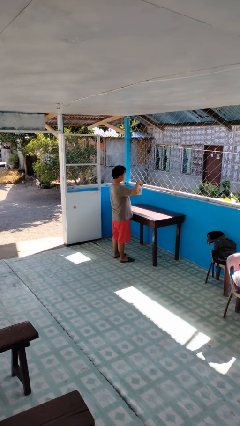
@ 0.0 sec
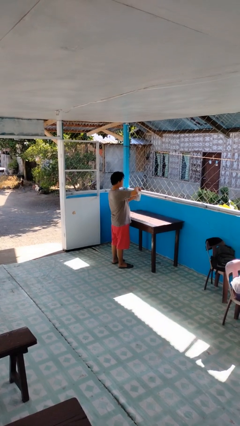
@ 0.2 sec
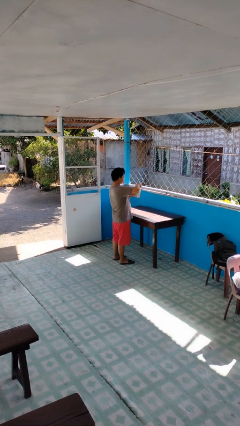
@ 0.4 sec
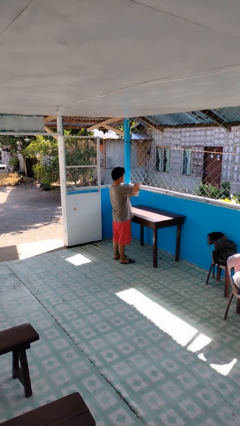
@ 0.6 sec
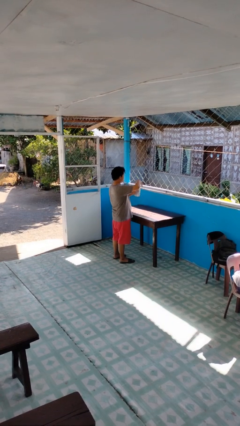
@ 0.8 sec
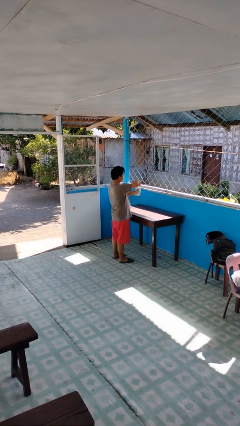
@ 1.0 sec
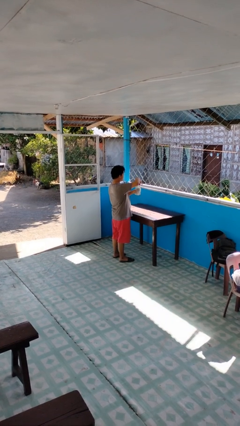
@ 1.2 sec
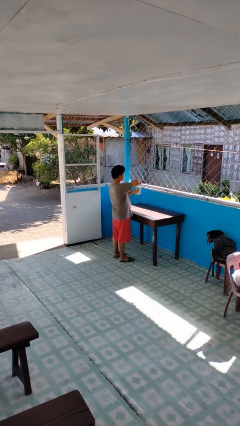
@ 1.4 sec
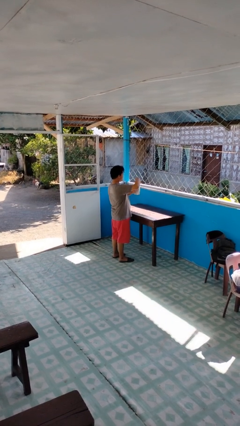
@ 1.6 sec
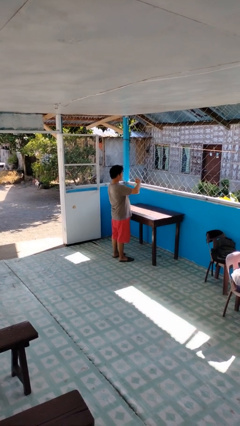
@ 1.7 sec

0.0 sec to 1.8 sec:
person opens jar

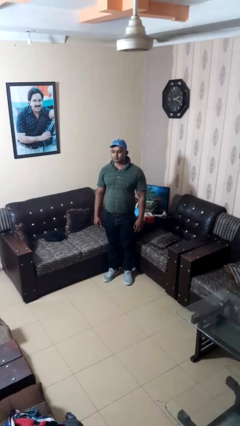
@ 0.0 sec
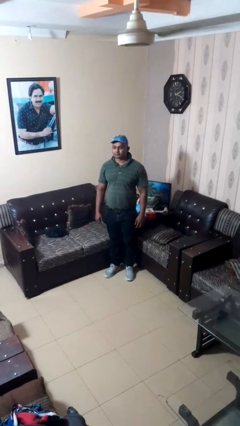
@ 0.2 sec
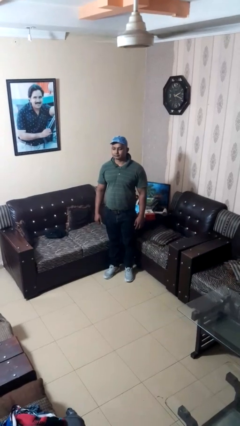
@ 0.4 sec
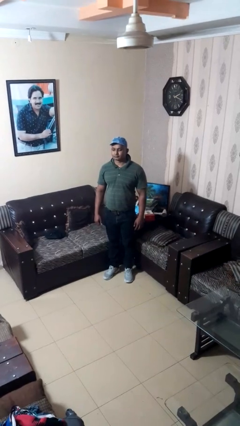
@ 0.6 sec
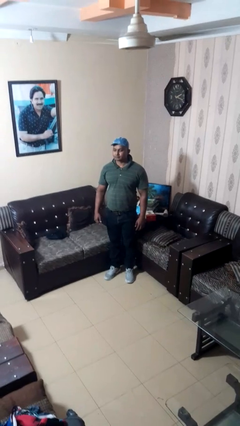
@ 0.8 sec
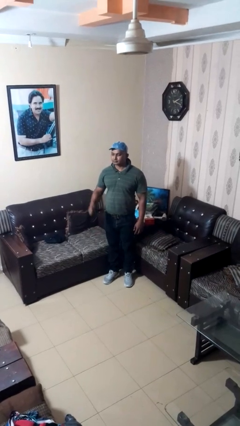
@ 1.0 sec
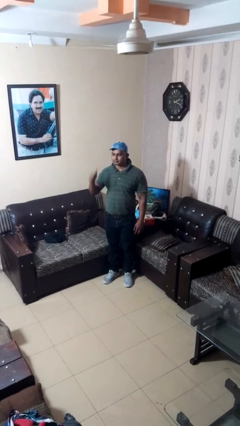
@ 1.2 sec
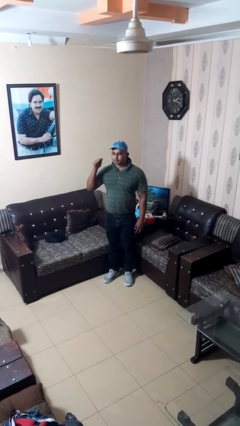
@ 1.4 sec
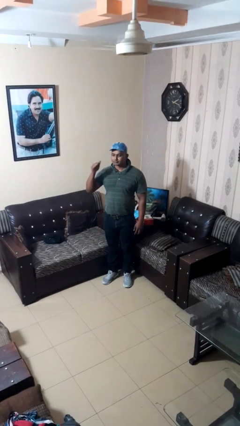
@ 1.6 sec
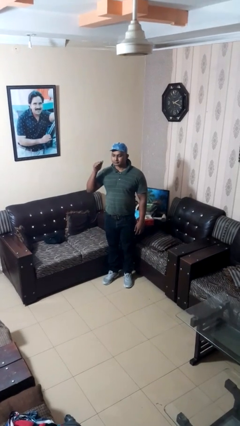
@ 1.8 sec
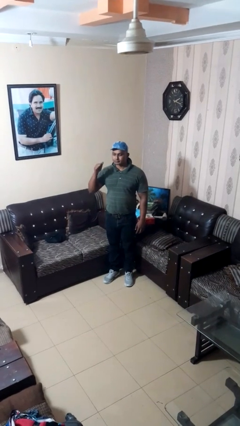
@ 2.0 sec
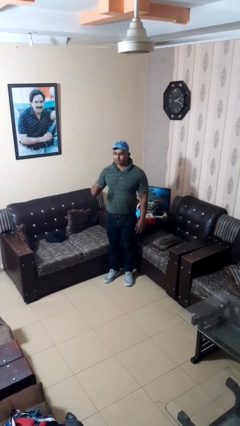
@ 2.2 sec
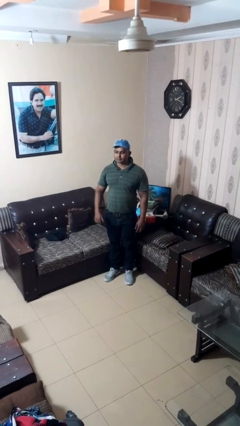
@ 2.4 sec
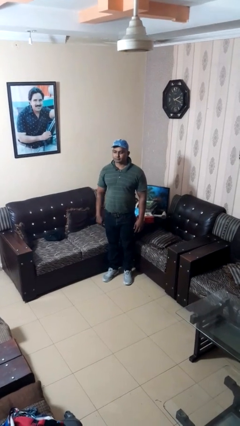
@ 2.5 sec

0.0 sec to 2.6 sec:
person gestures behind me

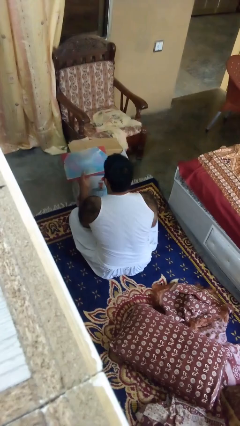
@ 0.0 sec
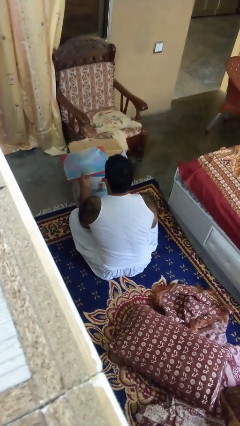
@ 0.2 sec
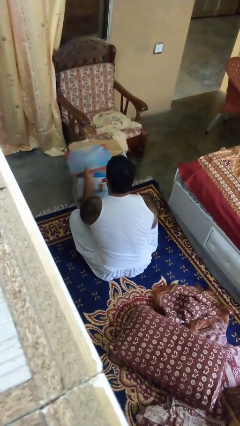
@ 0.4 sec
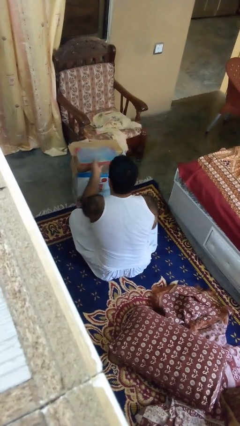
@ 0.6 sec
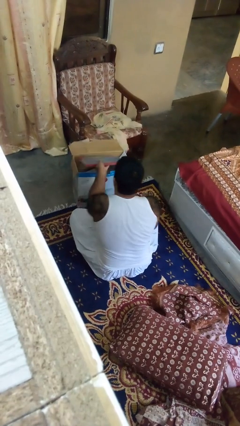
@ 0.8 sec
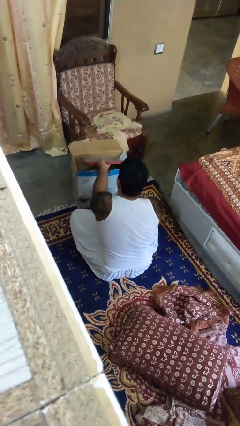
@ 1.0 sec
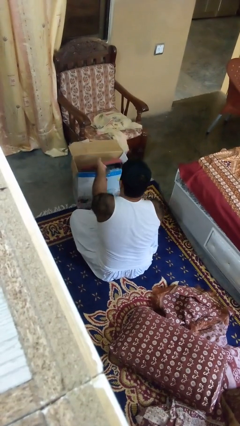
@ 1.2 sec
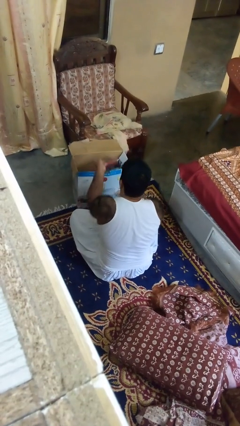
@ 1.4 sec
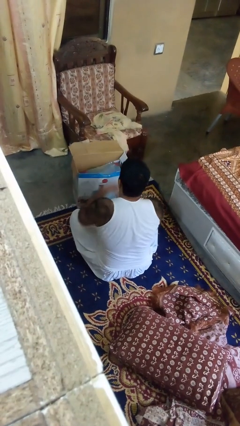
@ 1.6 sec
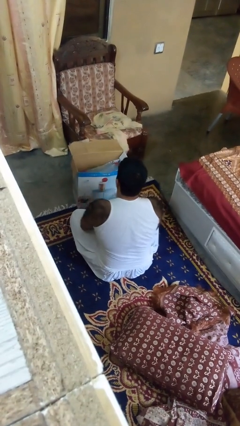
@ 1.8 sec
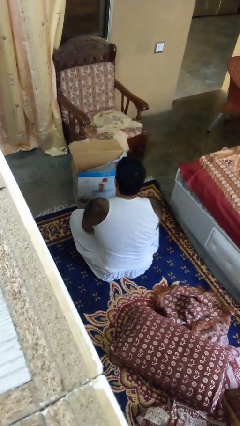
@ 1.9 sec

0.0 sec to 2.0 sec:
person puts object into box

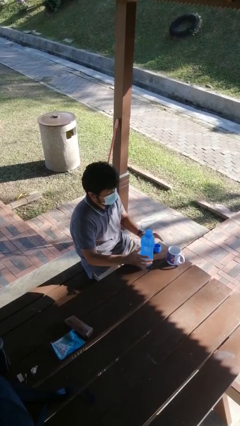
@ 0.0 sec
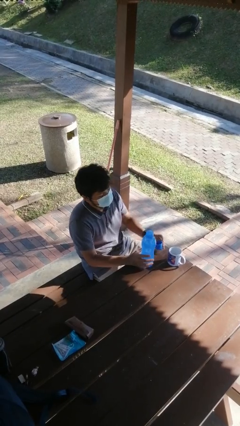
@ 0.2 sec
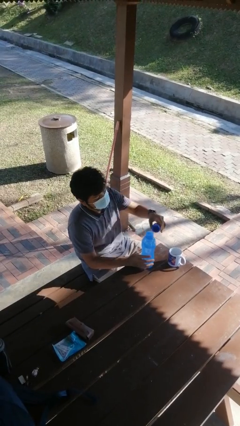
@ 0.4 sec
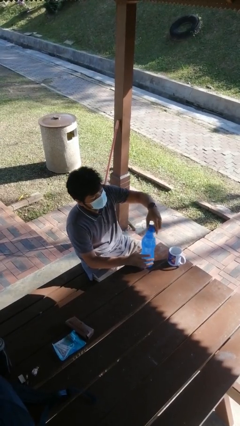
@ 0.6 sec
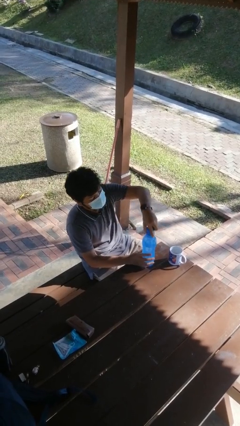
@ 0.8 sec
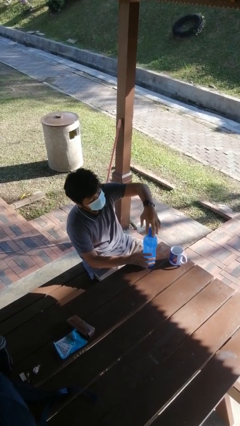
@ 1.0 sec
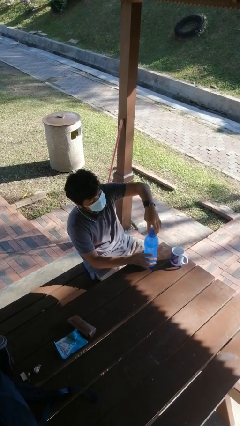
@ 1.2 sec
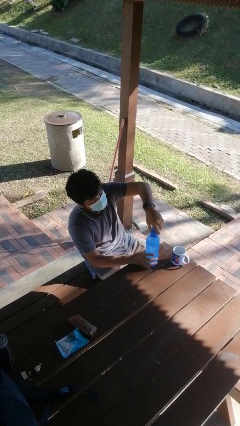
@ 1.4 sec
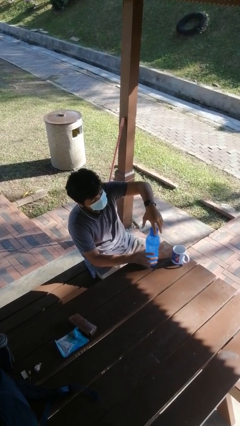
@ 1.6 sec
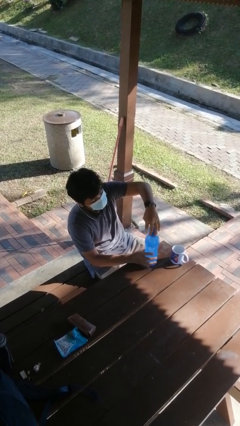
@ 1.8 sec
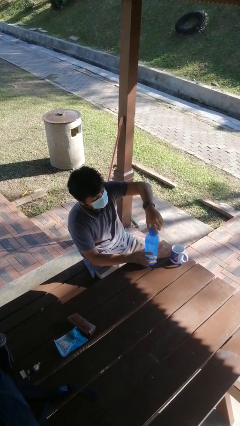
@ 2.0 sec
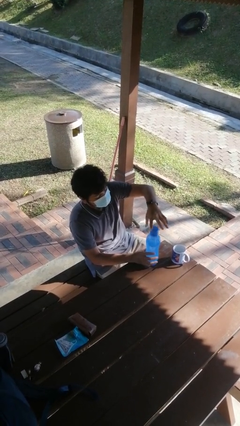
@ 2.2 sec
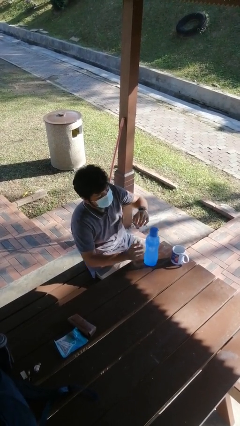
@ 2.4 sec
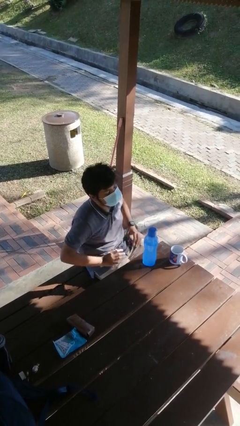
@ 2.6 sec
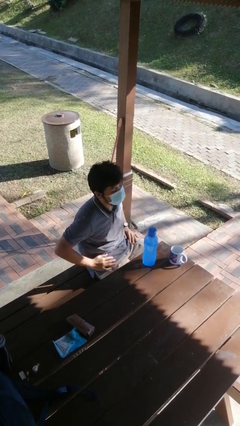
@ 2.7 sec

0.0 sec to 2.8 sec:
person screws lid to bottle

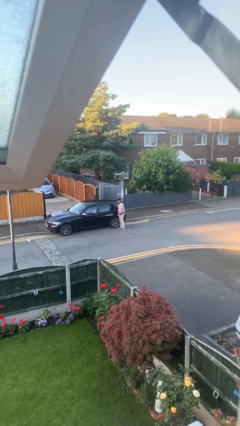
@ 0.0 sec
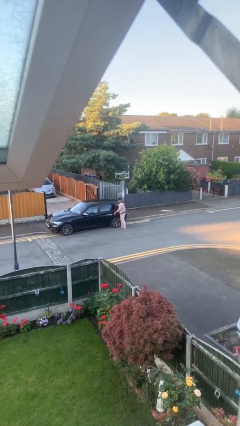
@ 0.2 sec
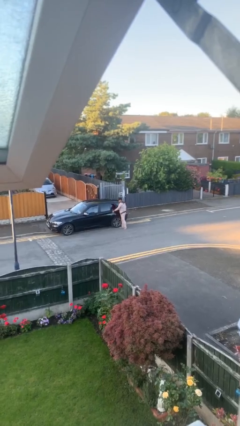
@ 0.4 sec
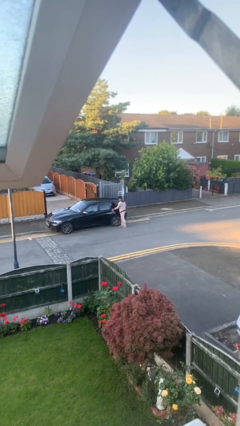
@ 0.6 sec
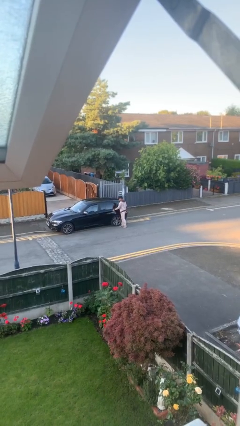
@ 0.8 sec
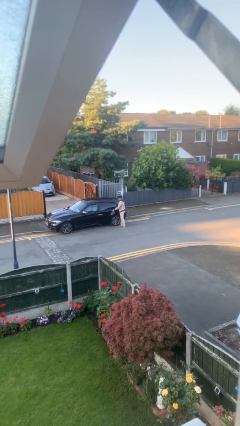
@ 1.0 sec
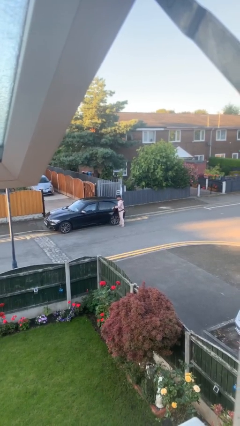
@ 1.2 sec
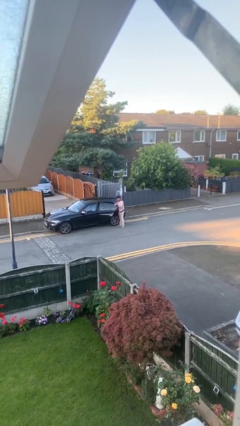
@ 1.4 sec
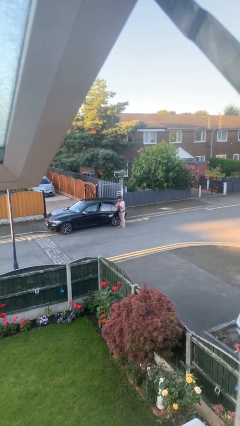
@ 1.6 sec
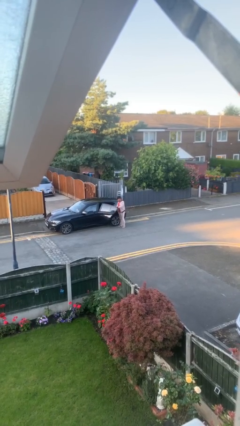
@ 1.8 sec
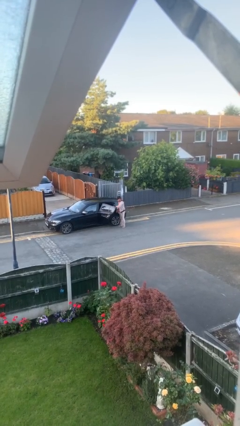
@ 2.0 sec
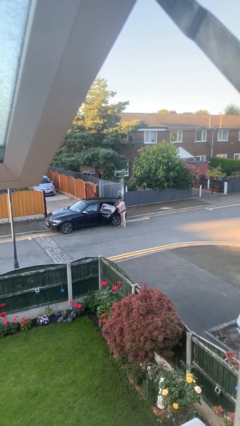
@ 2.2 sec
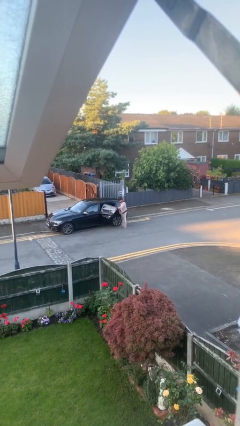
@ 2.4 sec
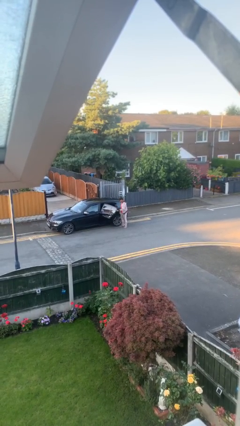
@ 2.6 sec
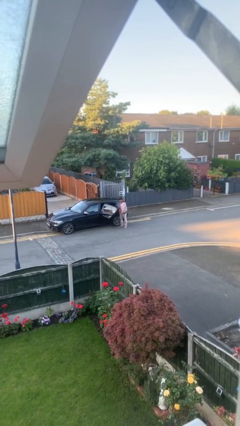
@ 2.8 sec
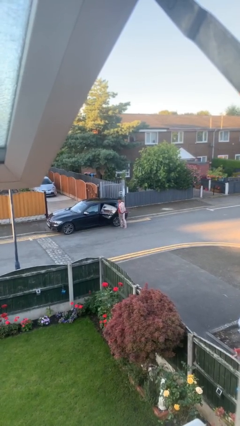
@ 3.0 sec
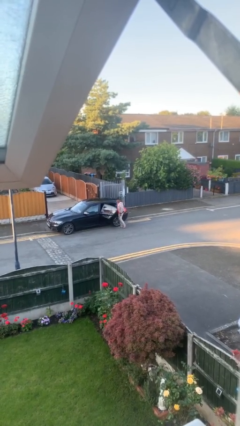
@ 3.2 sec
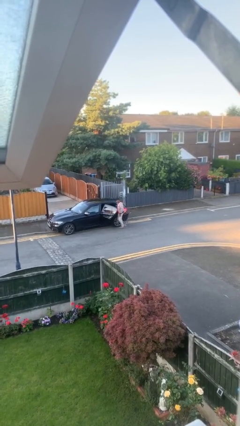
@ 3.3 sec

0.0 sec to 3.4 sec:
person opens car door

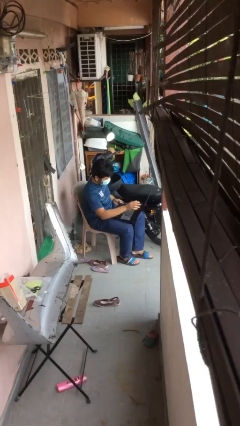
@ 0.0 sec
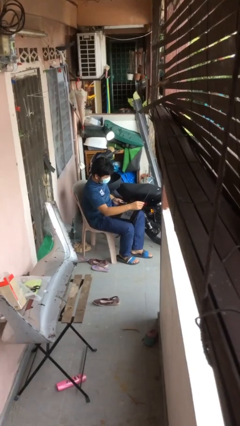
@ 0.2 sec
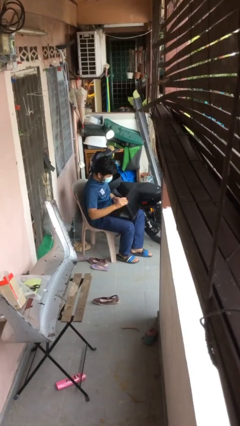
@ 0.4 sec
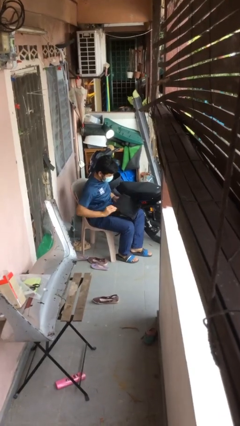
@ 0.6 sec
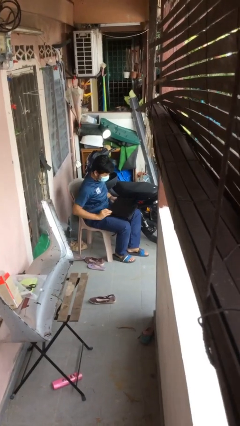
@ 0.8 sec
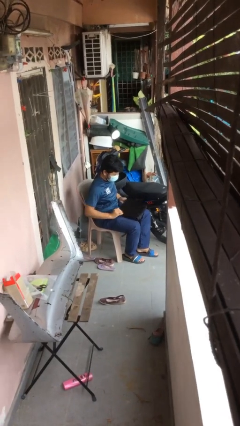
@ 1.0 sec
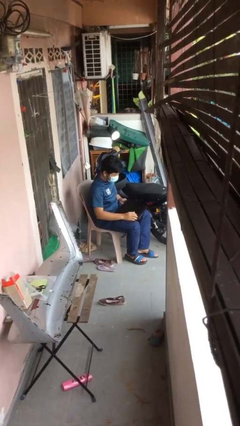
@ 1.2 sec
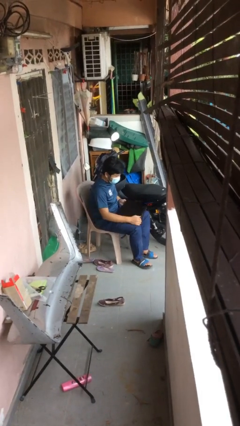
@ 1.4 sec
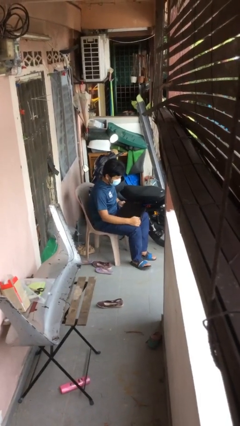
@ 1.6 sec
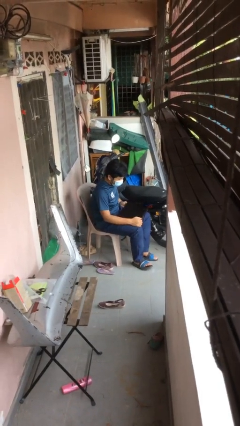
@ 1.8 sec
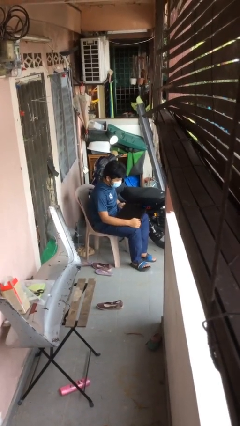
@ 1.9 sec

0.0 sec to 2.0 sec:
person closes laptop

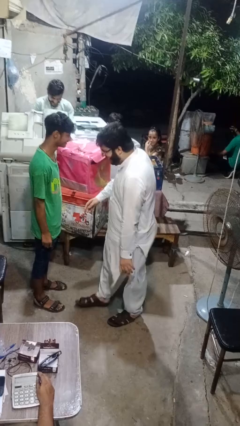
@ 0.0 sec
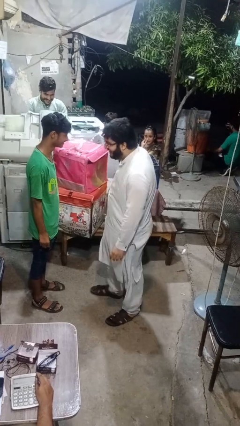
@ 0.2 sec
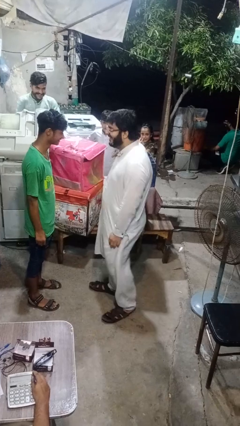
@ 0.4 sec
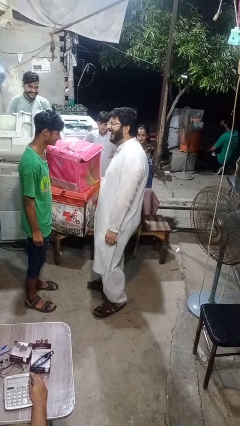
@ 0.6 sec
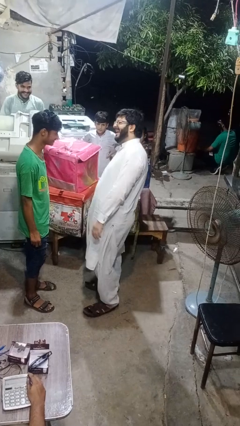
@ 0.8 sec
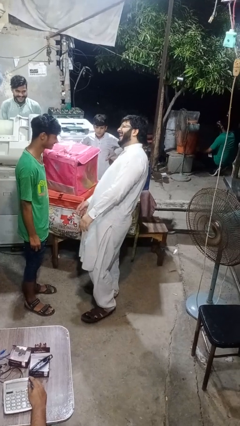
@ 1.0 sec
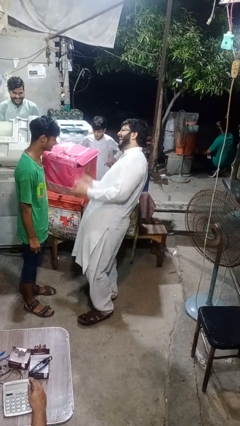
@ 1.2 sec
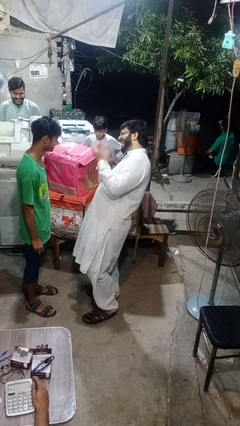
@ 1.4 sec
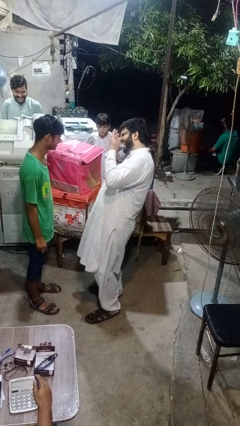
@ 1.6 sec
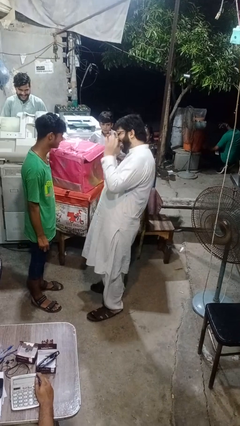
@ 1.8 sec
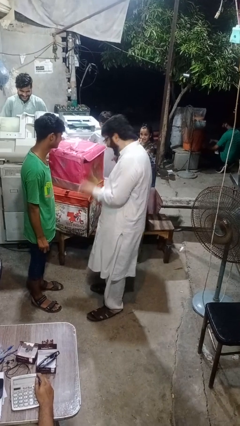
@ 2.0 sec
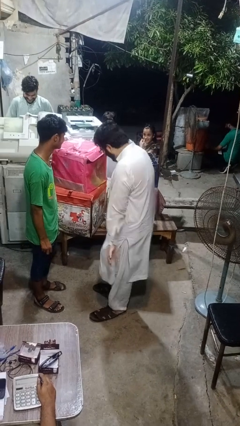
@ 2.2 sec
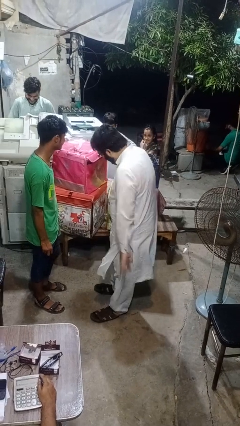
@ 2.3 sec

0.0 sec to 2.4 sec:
person laughs with person
